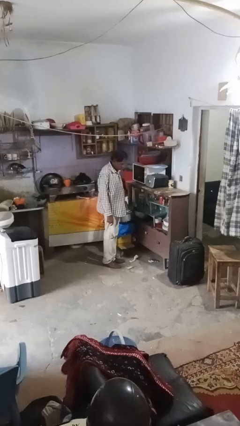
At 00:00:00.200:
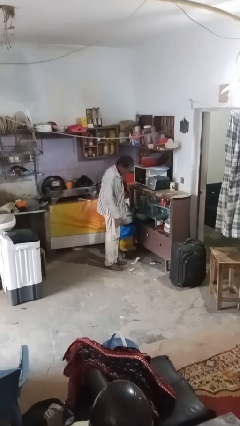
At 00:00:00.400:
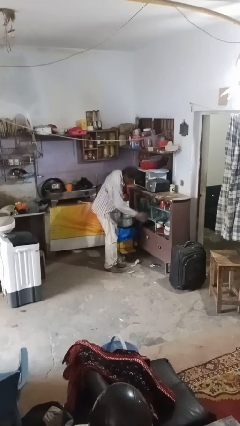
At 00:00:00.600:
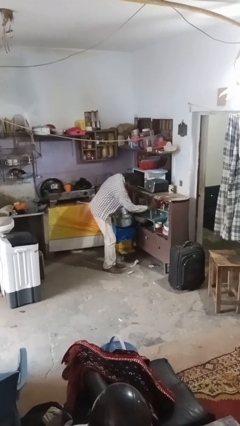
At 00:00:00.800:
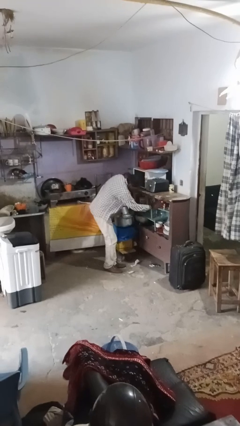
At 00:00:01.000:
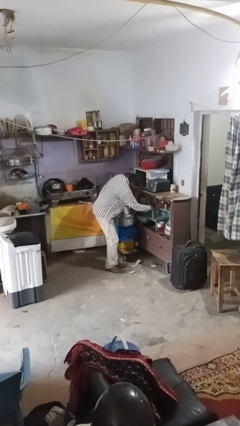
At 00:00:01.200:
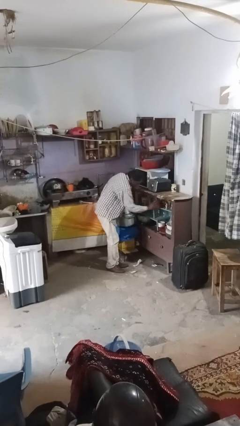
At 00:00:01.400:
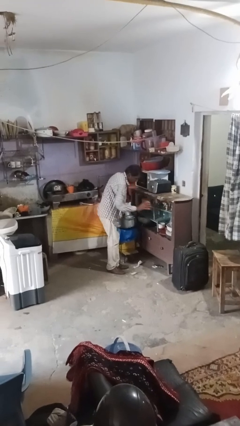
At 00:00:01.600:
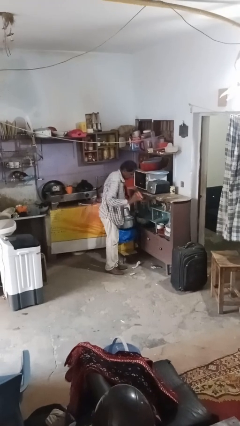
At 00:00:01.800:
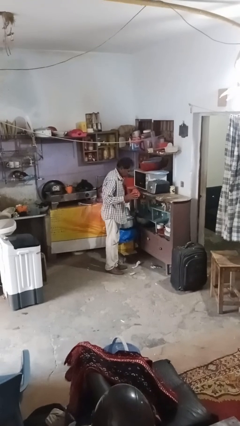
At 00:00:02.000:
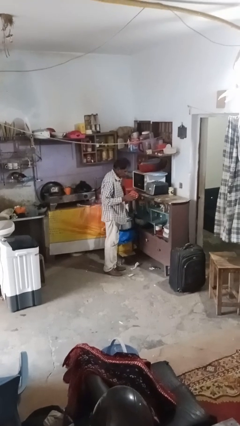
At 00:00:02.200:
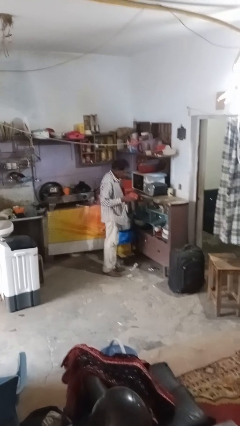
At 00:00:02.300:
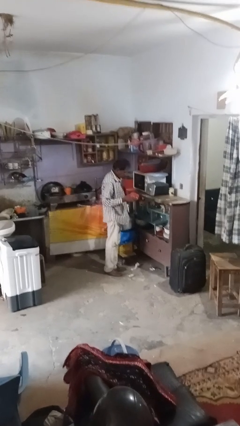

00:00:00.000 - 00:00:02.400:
person takes object from kitchen drawer

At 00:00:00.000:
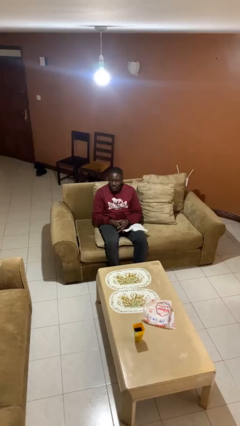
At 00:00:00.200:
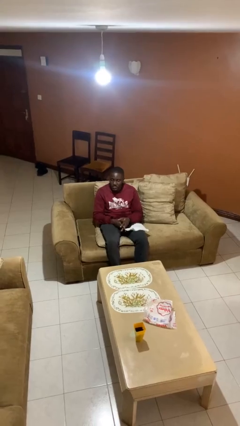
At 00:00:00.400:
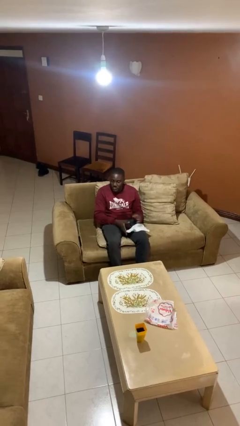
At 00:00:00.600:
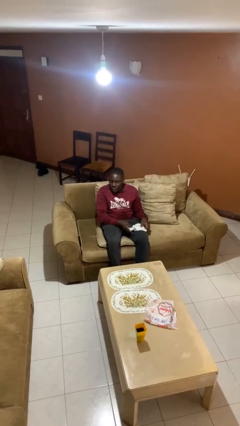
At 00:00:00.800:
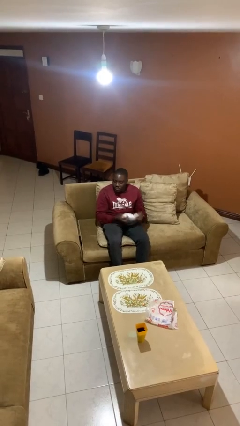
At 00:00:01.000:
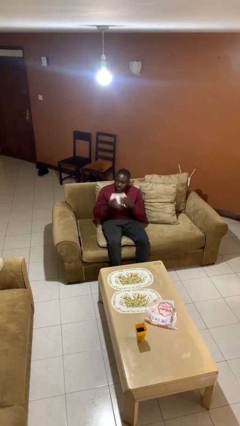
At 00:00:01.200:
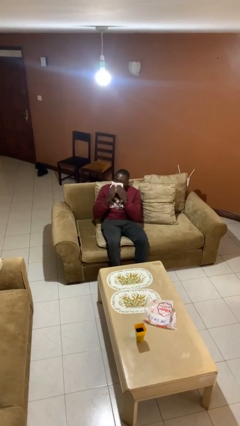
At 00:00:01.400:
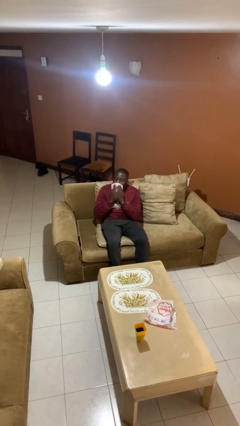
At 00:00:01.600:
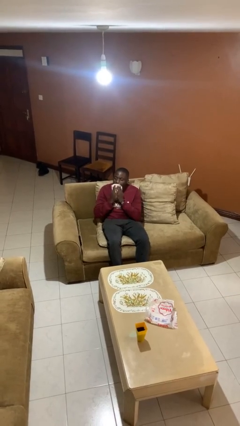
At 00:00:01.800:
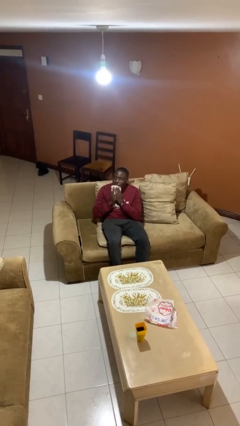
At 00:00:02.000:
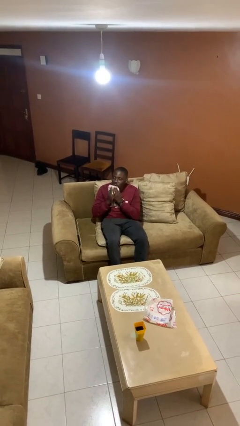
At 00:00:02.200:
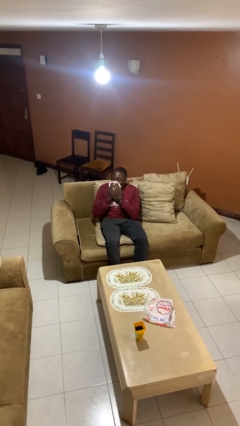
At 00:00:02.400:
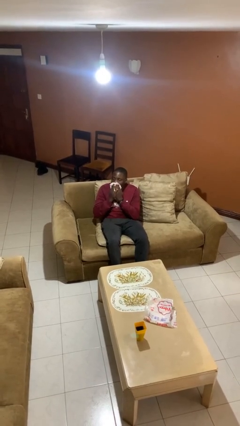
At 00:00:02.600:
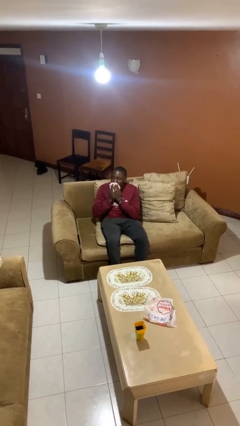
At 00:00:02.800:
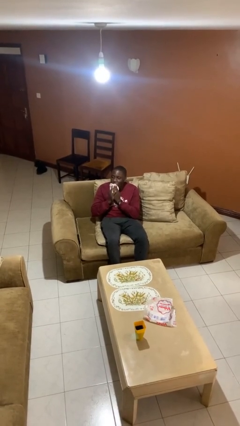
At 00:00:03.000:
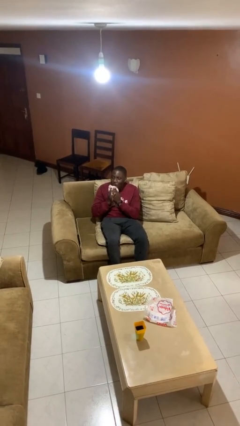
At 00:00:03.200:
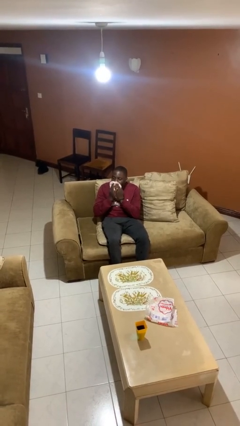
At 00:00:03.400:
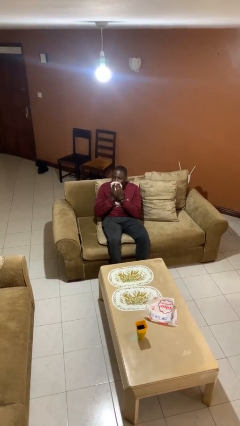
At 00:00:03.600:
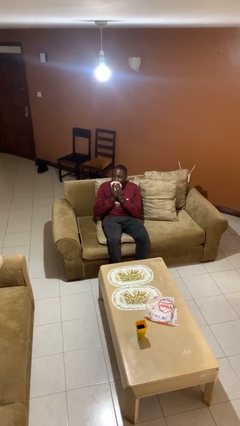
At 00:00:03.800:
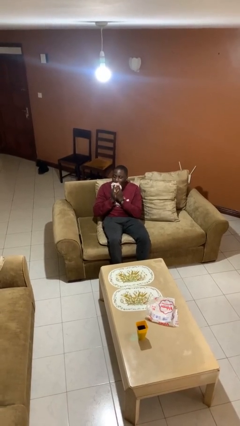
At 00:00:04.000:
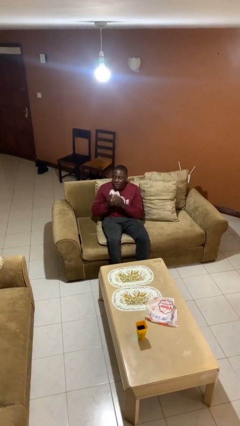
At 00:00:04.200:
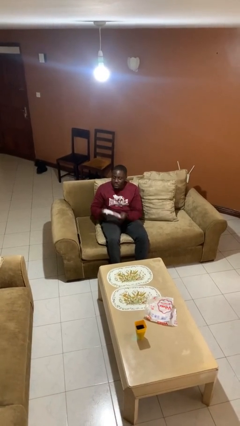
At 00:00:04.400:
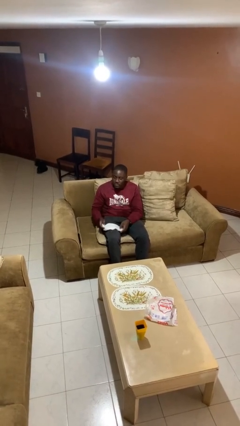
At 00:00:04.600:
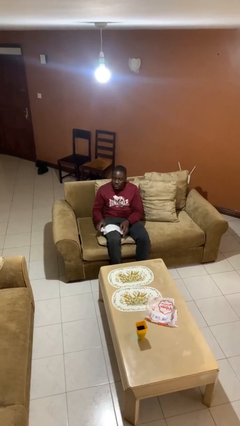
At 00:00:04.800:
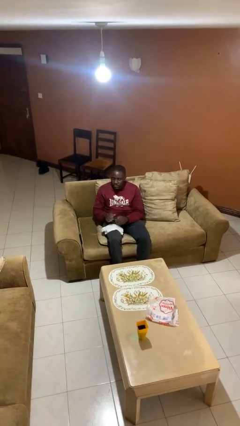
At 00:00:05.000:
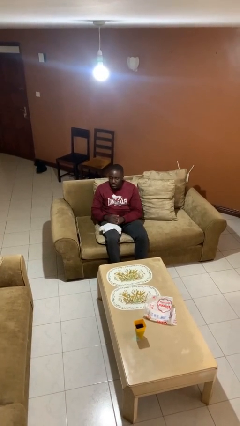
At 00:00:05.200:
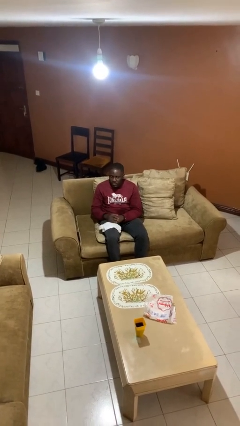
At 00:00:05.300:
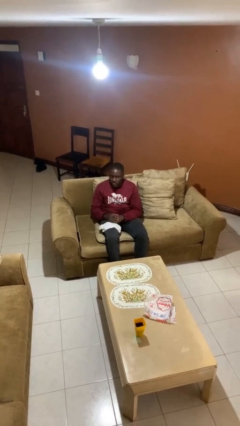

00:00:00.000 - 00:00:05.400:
person wipes mouth with napkin

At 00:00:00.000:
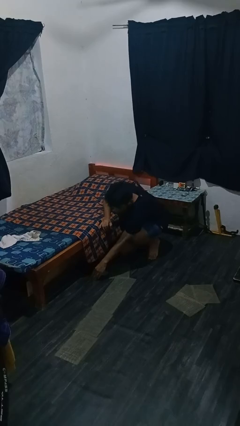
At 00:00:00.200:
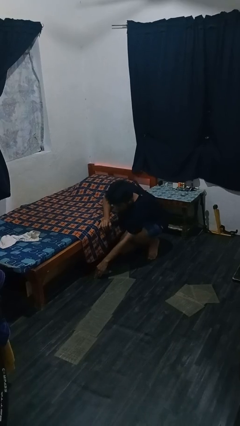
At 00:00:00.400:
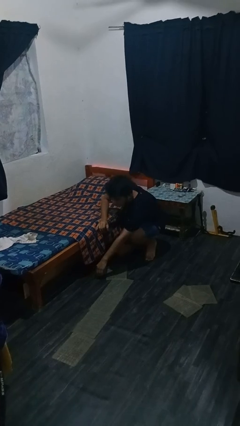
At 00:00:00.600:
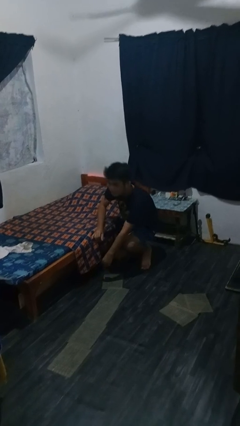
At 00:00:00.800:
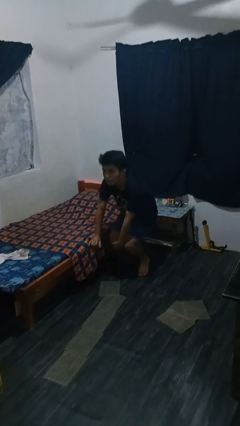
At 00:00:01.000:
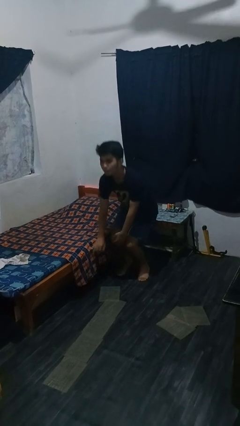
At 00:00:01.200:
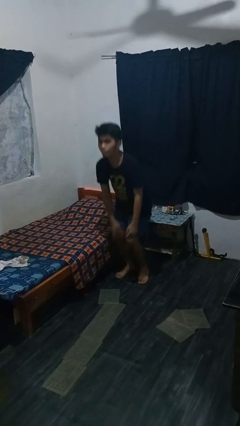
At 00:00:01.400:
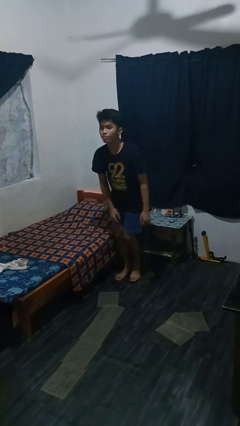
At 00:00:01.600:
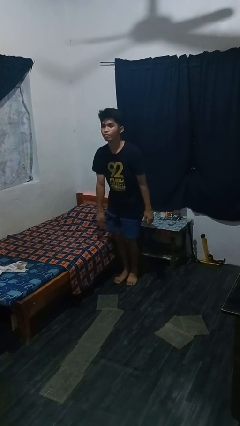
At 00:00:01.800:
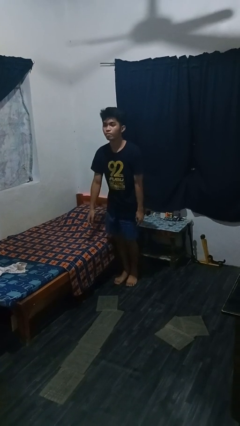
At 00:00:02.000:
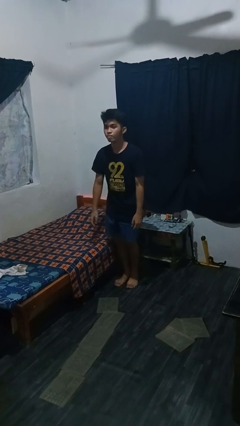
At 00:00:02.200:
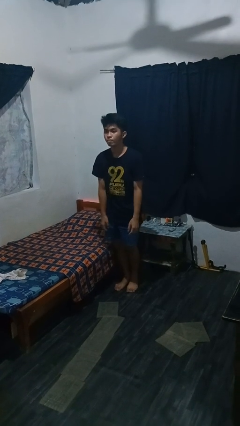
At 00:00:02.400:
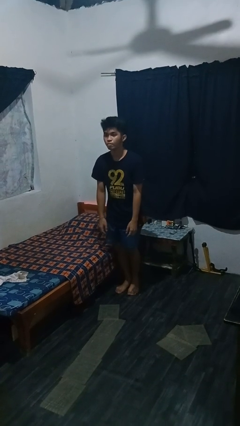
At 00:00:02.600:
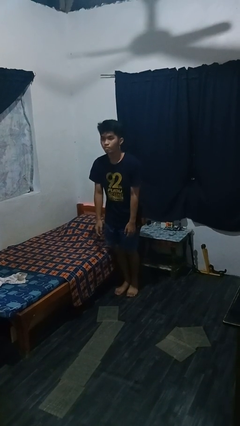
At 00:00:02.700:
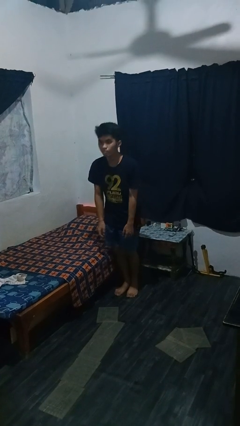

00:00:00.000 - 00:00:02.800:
person stands up from floor

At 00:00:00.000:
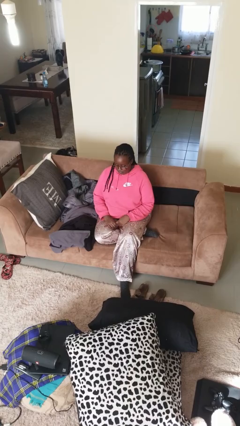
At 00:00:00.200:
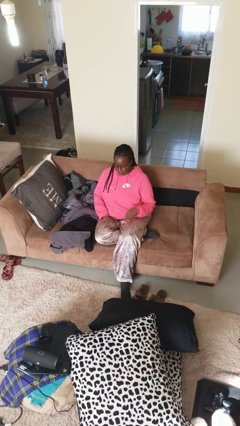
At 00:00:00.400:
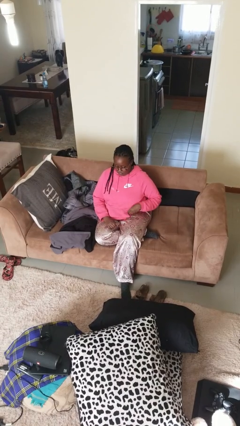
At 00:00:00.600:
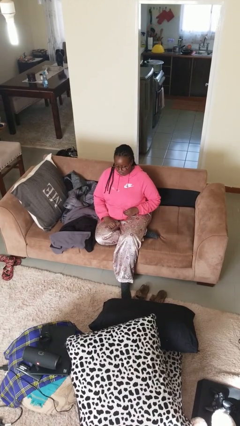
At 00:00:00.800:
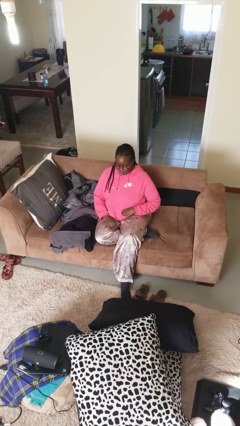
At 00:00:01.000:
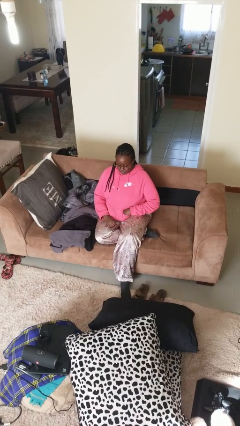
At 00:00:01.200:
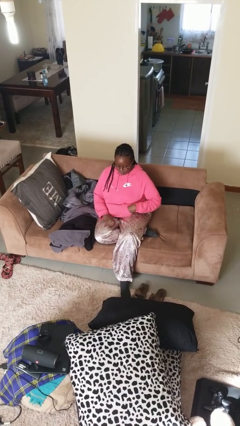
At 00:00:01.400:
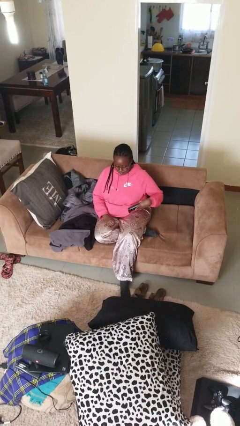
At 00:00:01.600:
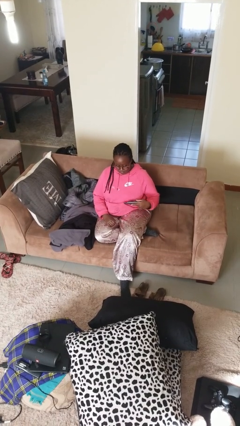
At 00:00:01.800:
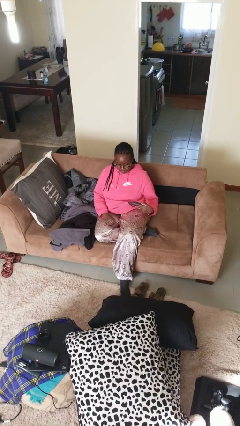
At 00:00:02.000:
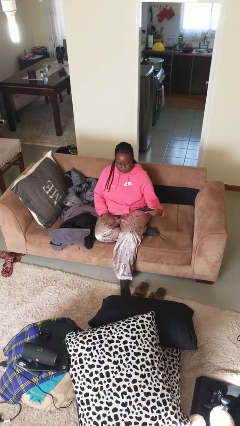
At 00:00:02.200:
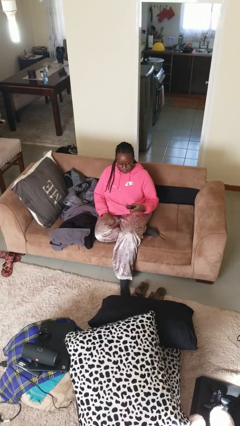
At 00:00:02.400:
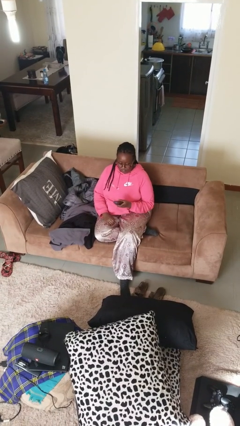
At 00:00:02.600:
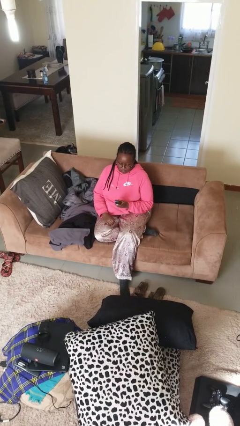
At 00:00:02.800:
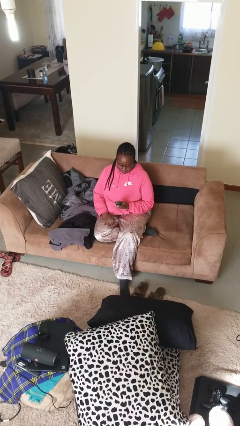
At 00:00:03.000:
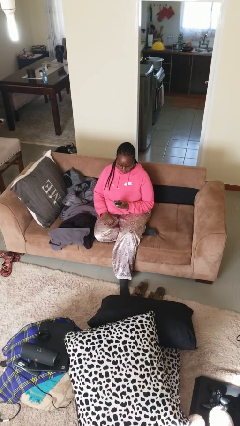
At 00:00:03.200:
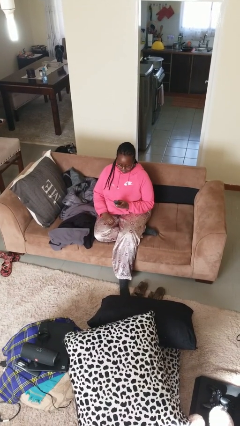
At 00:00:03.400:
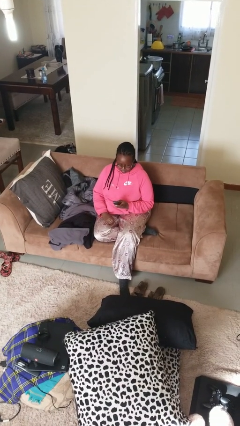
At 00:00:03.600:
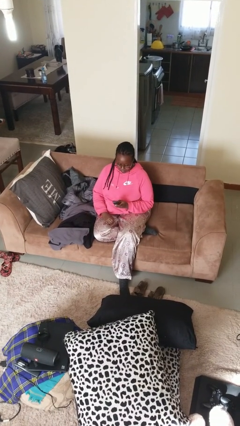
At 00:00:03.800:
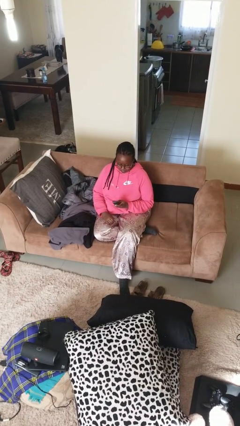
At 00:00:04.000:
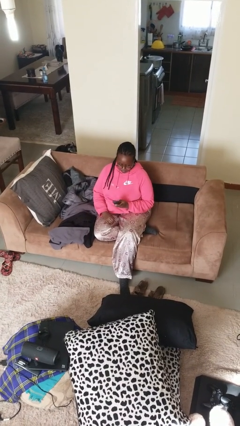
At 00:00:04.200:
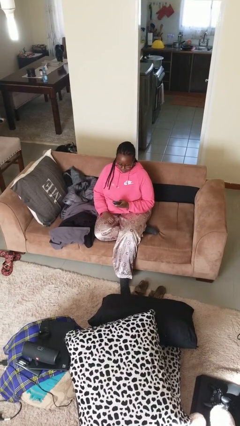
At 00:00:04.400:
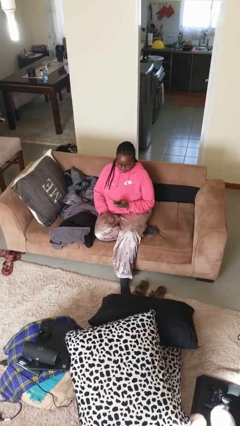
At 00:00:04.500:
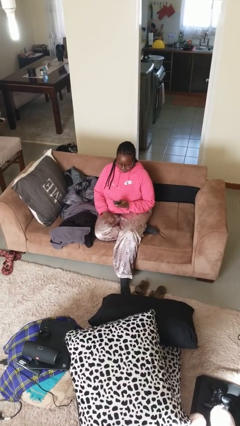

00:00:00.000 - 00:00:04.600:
person takes phone from pocket

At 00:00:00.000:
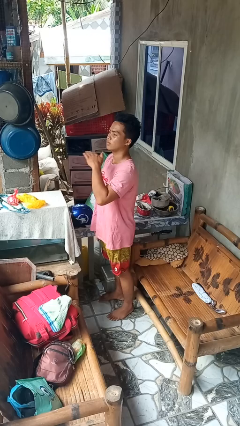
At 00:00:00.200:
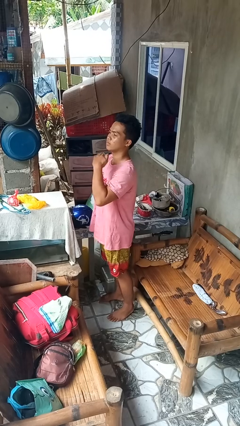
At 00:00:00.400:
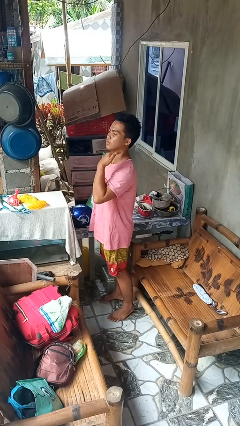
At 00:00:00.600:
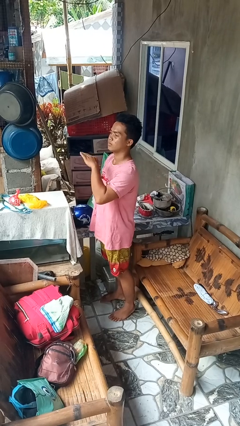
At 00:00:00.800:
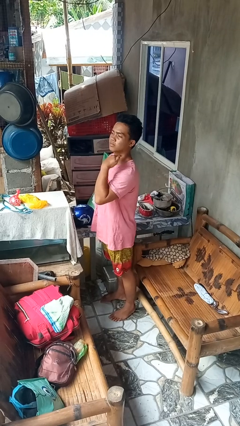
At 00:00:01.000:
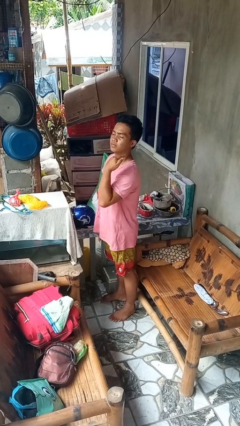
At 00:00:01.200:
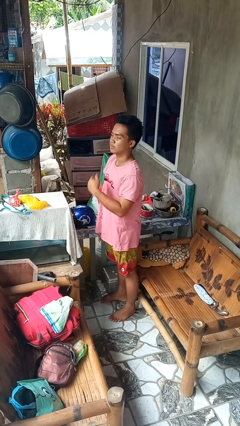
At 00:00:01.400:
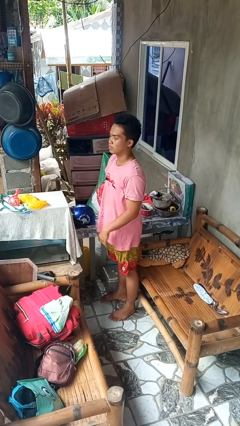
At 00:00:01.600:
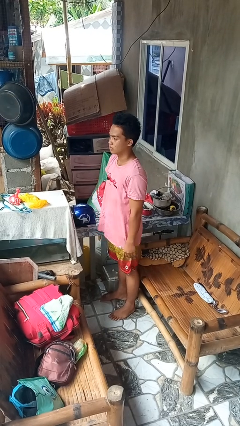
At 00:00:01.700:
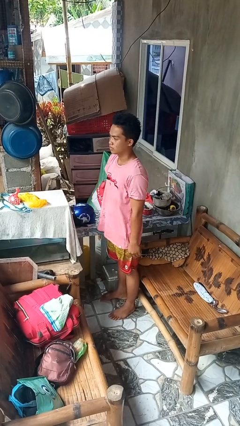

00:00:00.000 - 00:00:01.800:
person gestures cut

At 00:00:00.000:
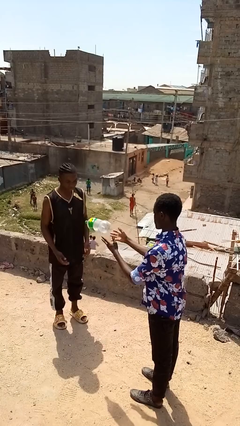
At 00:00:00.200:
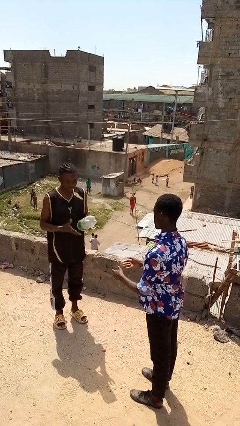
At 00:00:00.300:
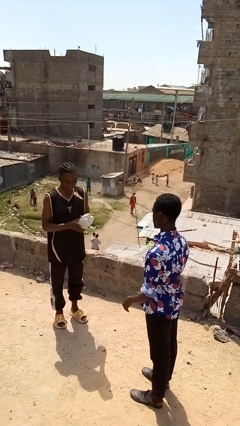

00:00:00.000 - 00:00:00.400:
person throws object to person
